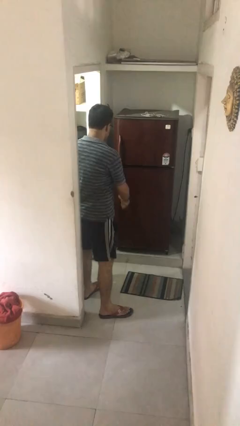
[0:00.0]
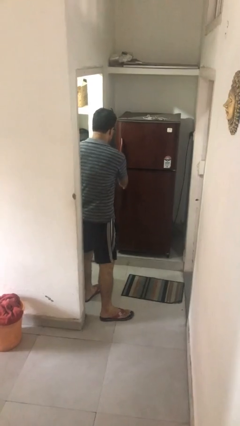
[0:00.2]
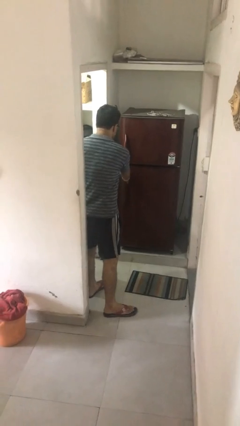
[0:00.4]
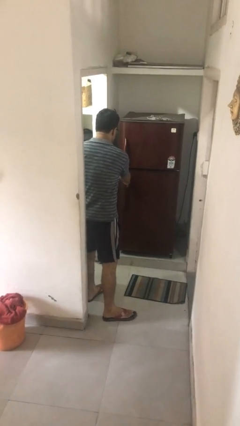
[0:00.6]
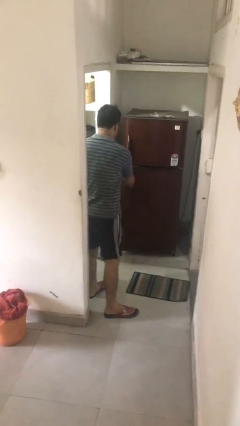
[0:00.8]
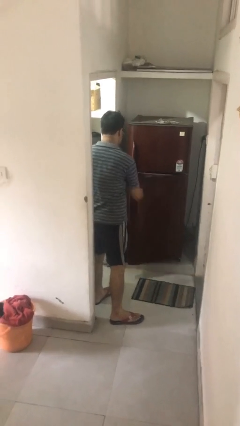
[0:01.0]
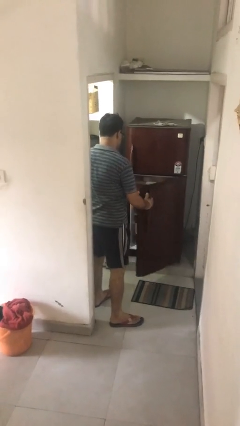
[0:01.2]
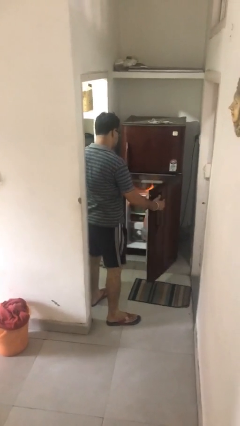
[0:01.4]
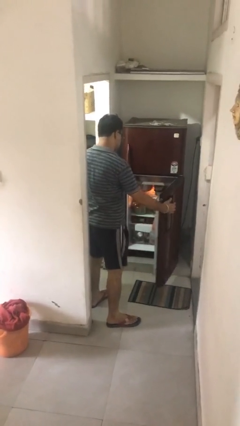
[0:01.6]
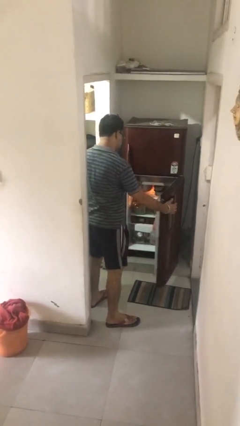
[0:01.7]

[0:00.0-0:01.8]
person opens refrigerator

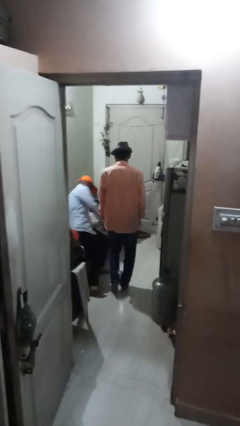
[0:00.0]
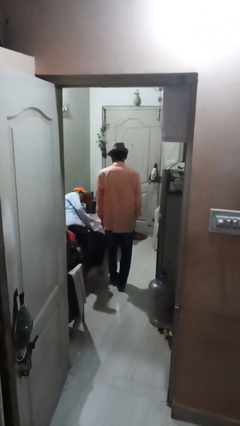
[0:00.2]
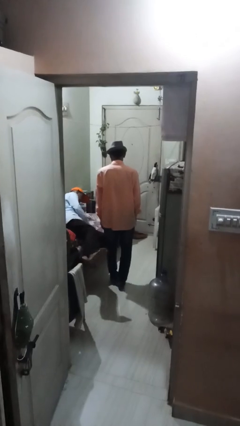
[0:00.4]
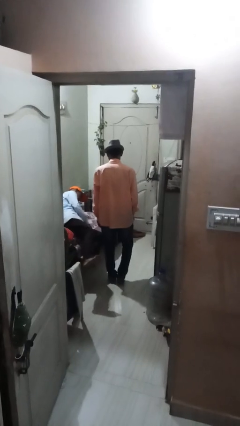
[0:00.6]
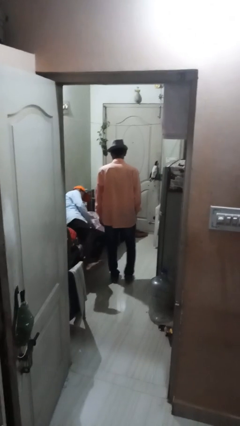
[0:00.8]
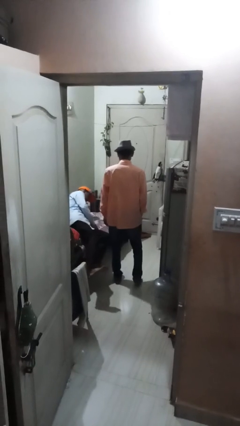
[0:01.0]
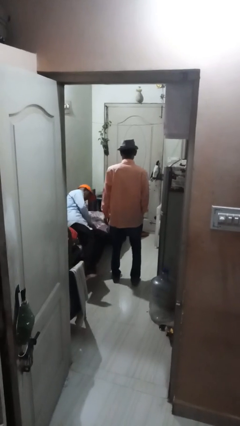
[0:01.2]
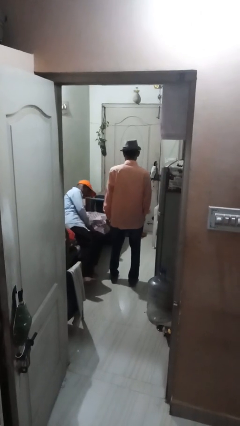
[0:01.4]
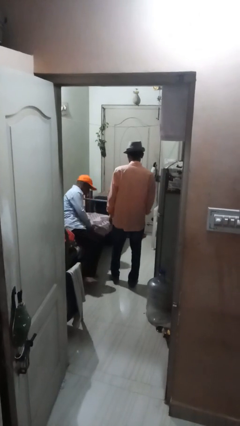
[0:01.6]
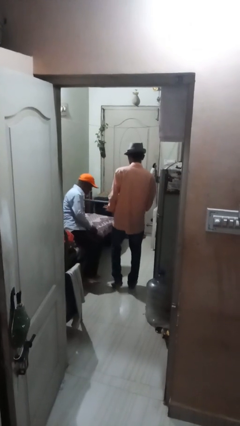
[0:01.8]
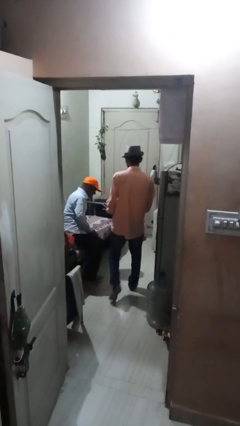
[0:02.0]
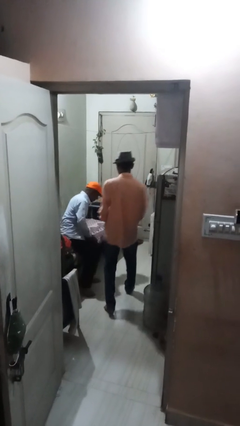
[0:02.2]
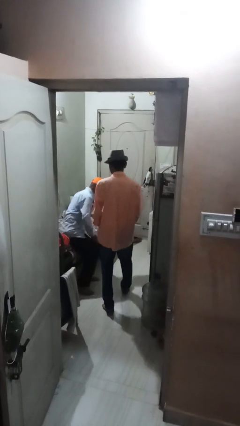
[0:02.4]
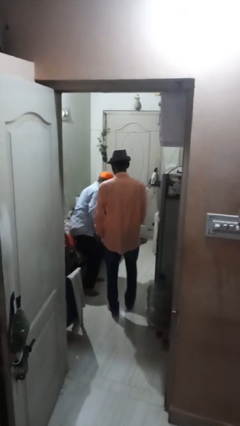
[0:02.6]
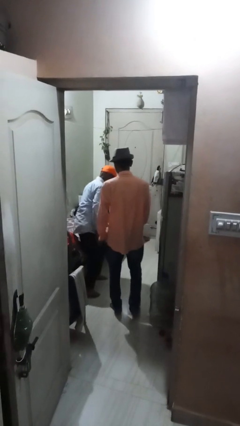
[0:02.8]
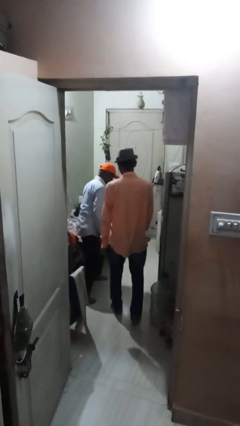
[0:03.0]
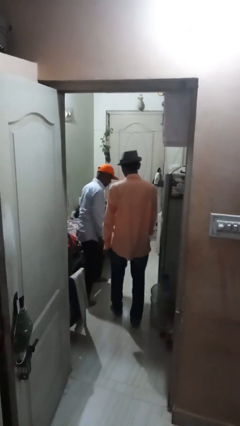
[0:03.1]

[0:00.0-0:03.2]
person bumps into person

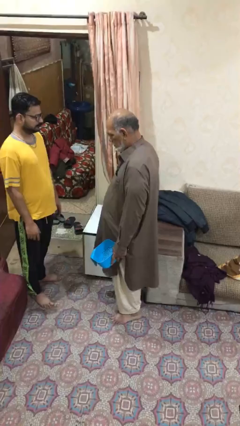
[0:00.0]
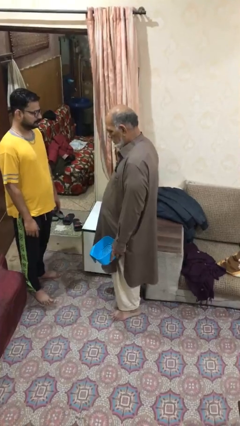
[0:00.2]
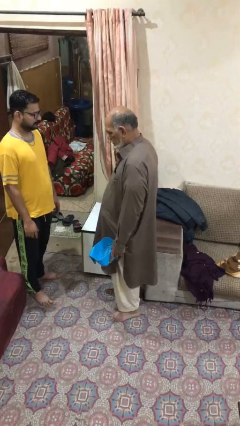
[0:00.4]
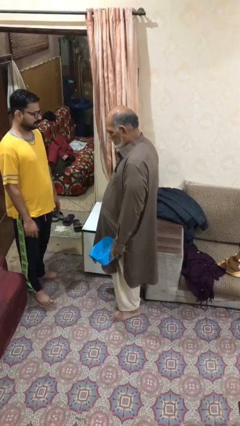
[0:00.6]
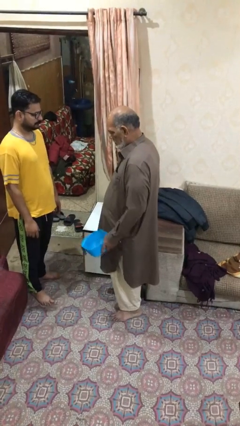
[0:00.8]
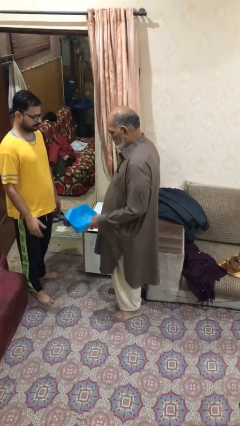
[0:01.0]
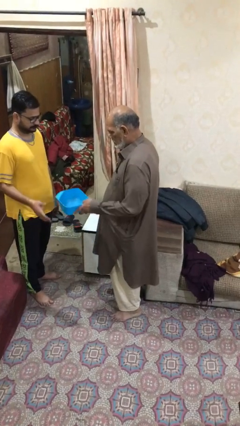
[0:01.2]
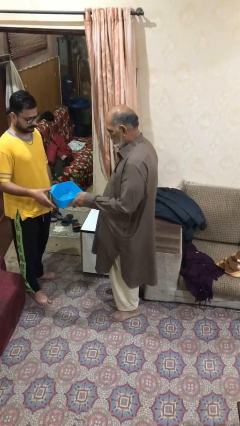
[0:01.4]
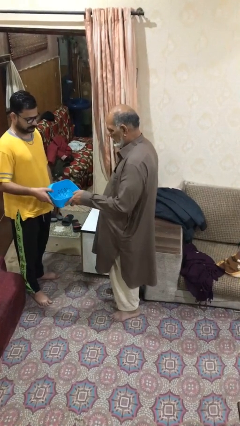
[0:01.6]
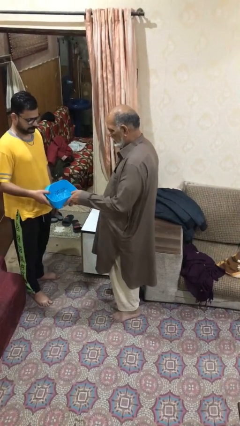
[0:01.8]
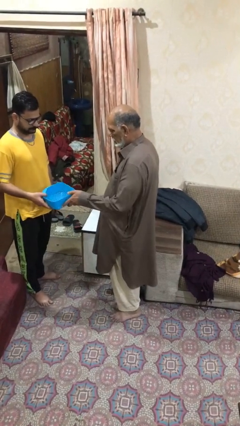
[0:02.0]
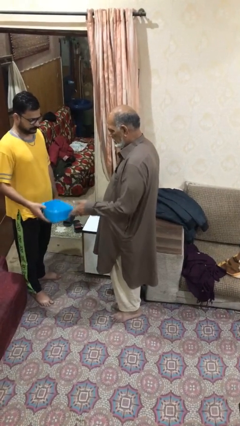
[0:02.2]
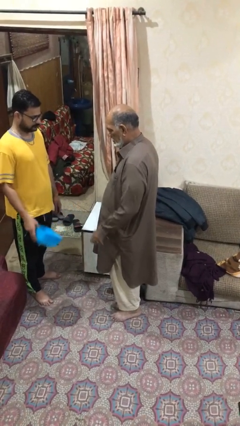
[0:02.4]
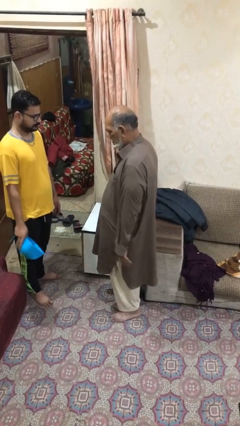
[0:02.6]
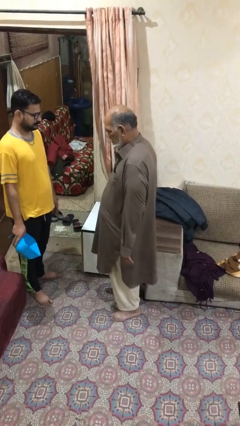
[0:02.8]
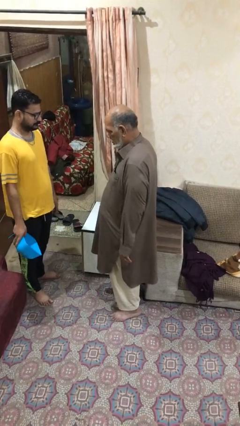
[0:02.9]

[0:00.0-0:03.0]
person transfers object to person

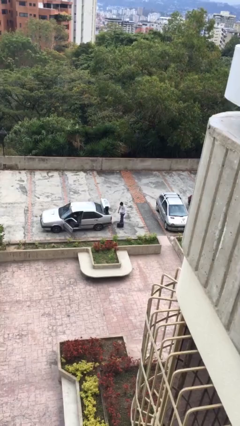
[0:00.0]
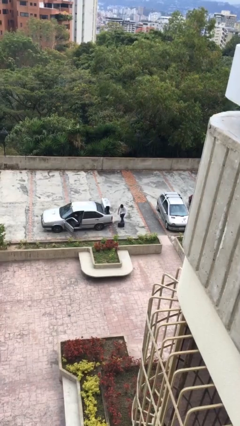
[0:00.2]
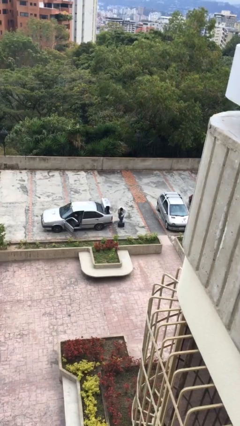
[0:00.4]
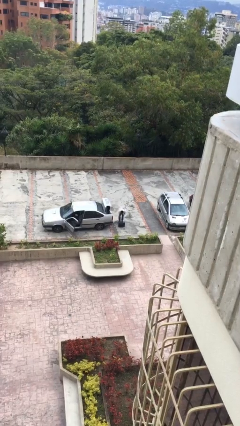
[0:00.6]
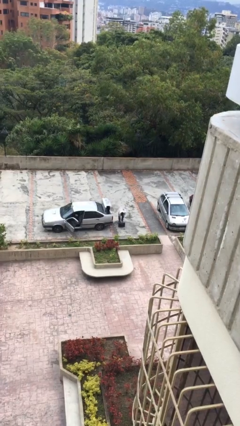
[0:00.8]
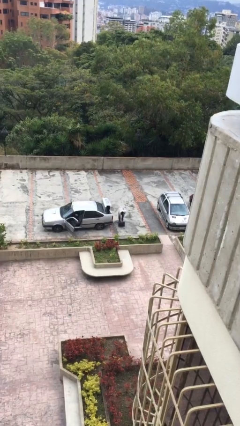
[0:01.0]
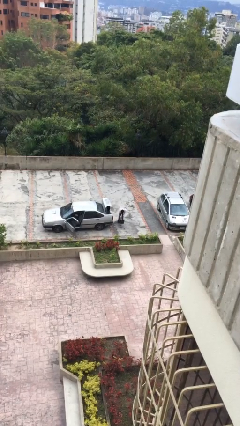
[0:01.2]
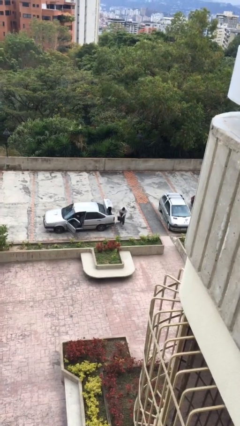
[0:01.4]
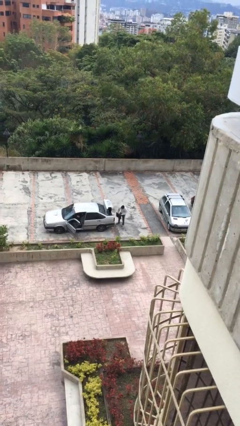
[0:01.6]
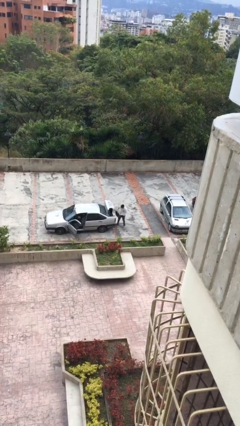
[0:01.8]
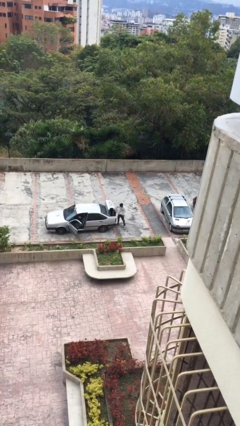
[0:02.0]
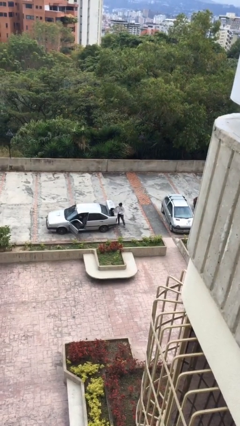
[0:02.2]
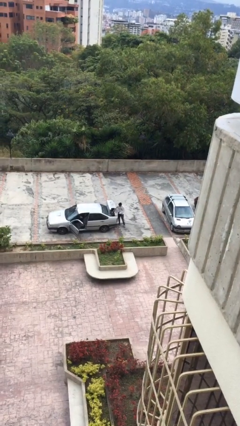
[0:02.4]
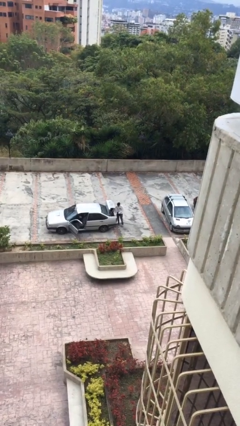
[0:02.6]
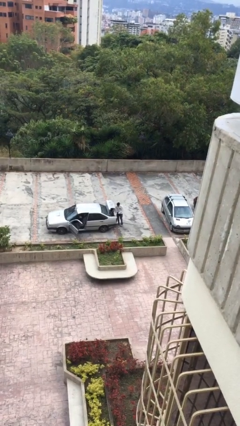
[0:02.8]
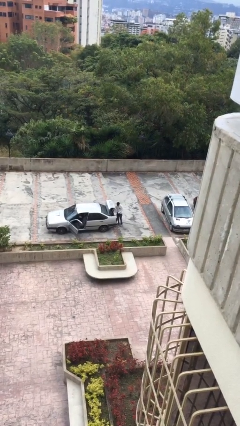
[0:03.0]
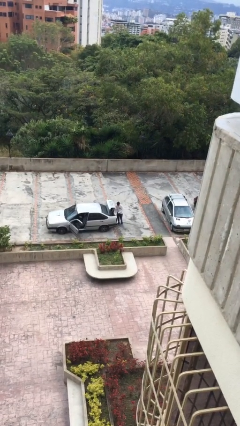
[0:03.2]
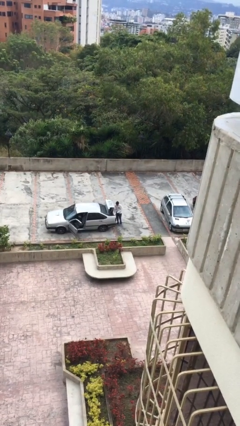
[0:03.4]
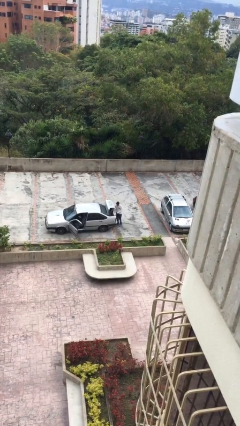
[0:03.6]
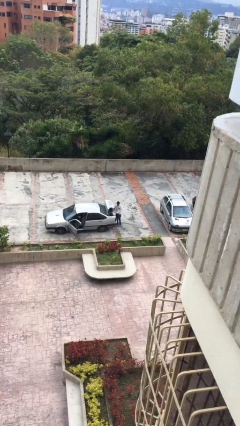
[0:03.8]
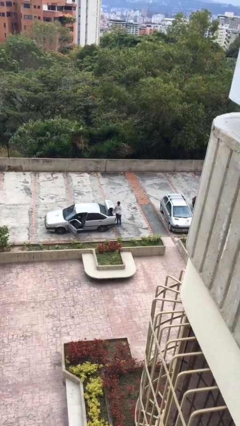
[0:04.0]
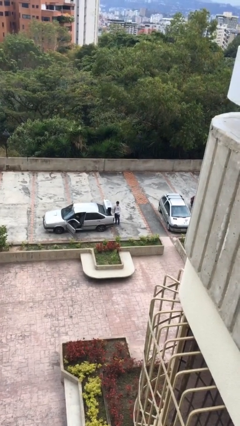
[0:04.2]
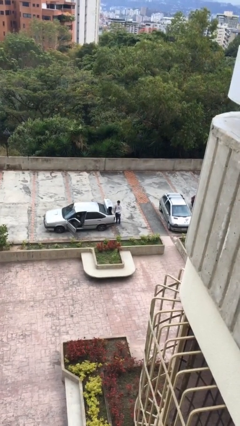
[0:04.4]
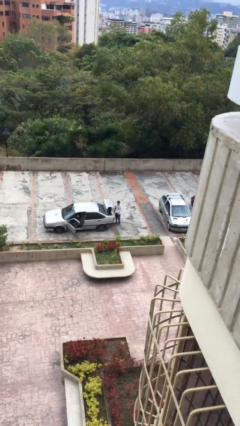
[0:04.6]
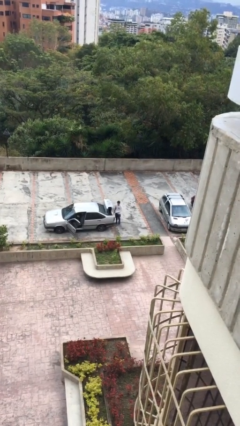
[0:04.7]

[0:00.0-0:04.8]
person loads car

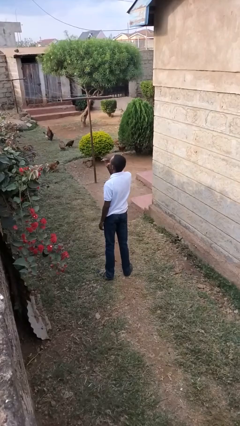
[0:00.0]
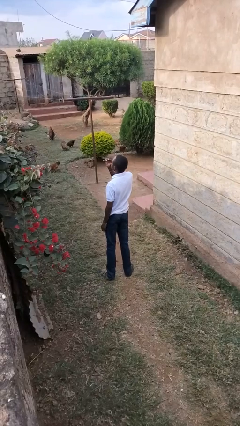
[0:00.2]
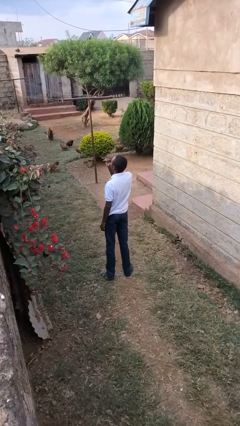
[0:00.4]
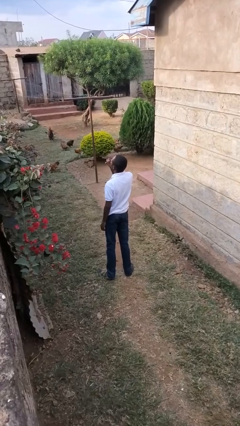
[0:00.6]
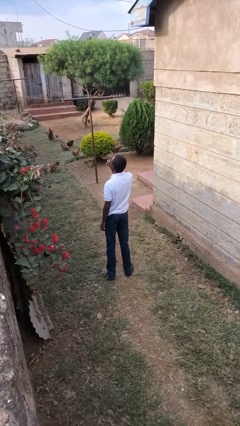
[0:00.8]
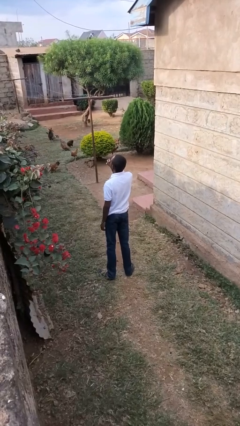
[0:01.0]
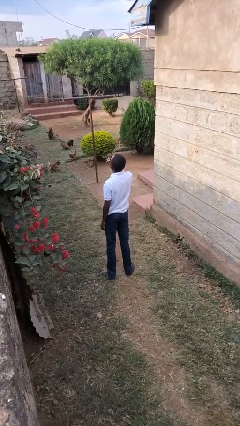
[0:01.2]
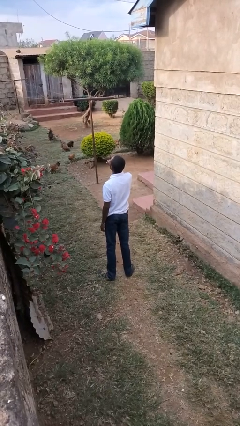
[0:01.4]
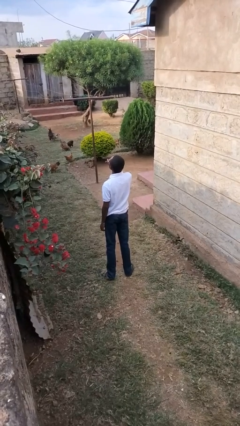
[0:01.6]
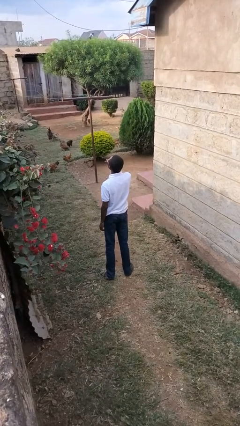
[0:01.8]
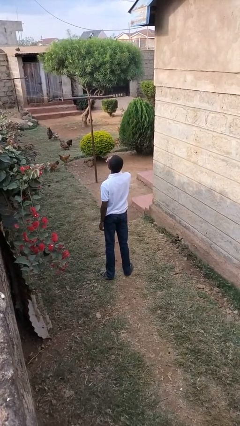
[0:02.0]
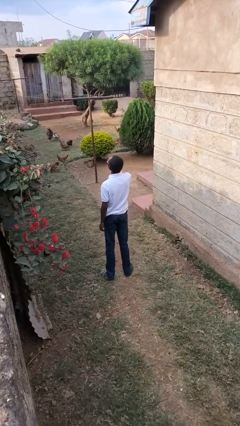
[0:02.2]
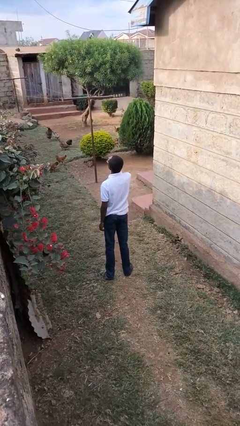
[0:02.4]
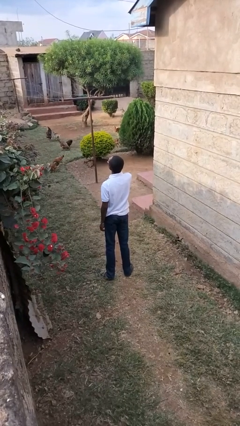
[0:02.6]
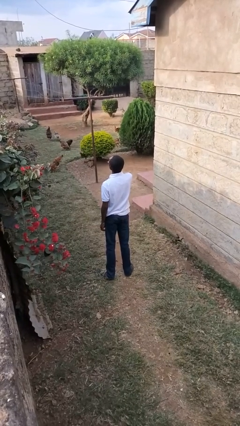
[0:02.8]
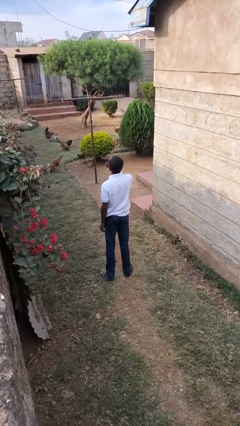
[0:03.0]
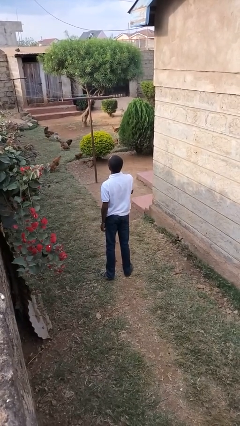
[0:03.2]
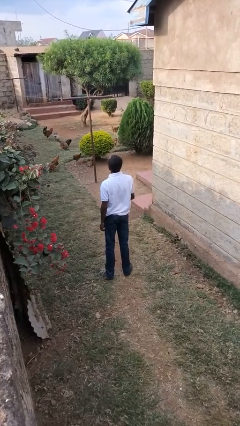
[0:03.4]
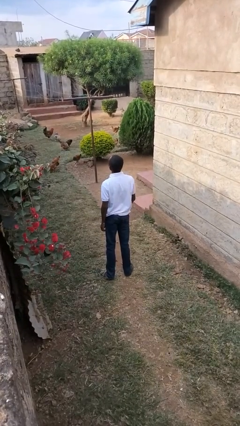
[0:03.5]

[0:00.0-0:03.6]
person licks fingers

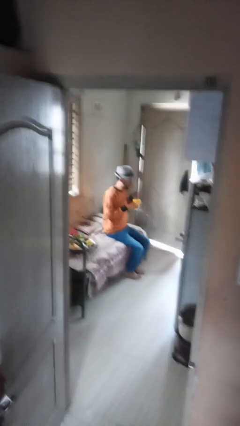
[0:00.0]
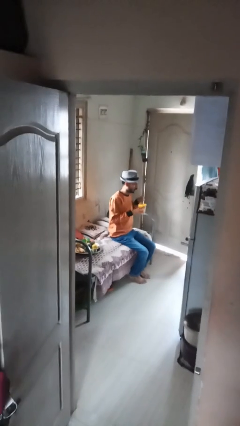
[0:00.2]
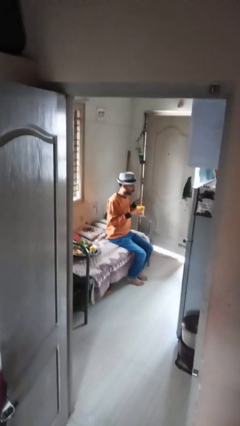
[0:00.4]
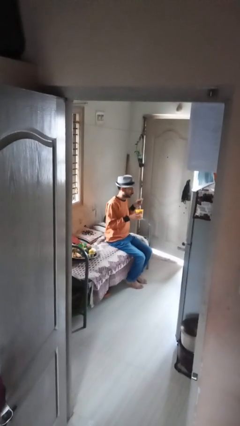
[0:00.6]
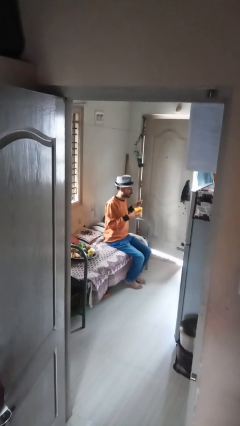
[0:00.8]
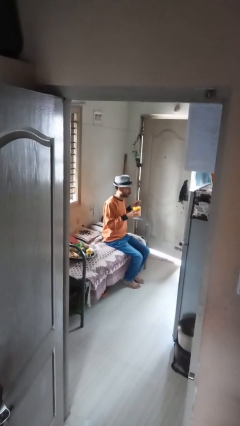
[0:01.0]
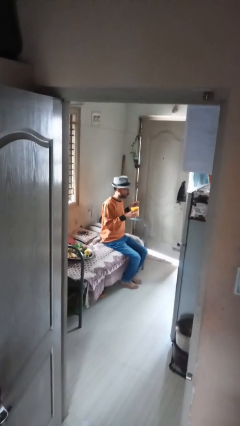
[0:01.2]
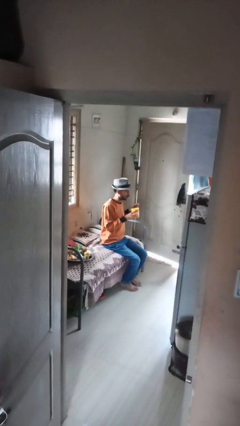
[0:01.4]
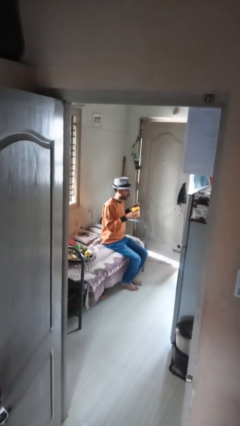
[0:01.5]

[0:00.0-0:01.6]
person stirs mug
